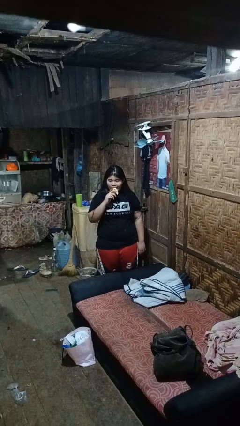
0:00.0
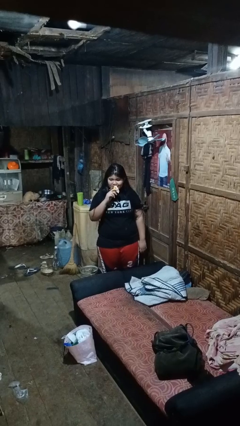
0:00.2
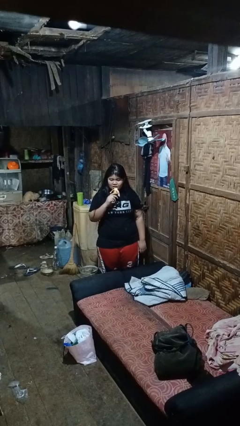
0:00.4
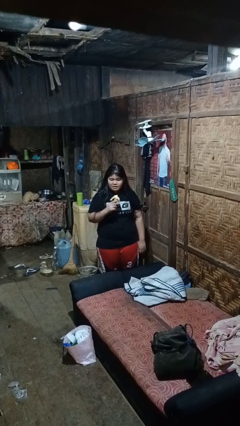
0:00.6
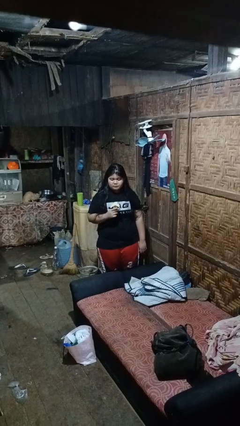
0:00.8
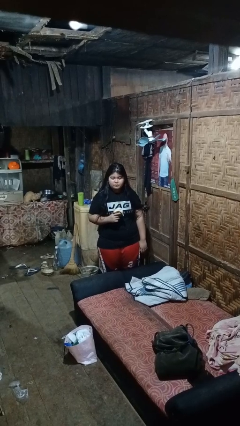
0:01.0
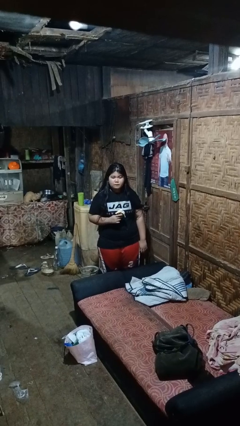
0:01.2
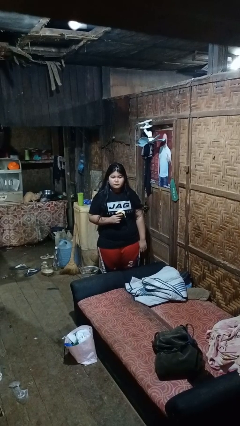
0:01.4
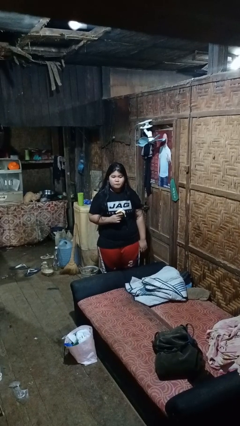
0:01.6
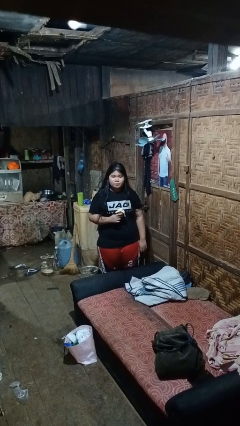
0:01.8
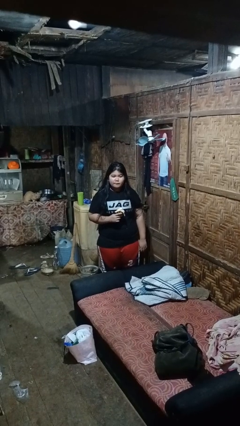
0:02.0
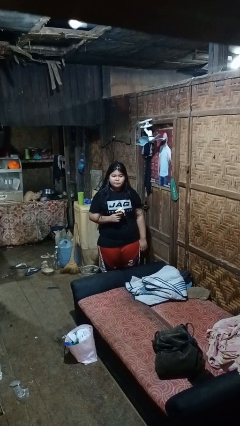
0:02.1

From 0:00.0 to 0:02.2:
person eats banana

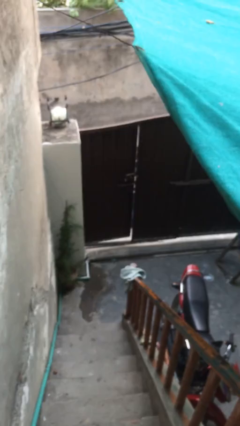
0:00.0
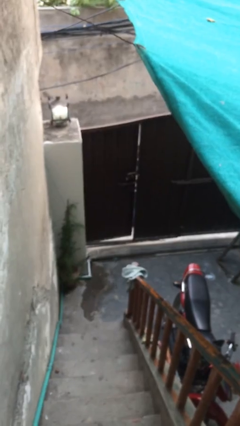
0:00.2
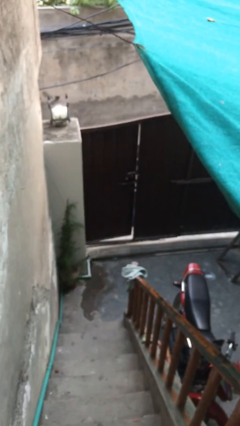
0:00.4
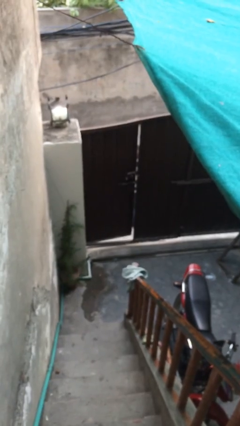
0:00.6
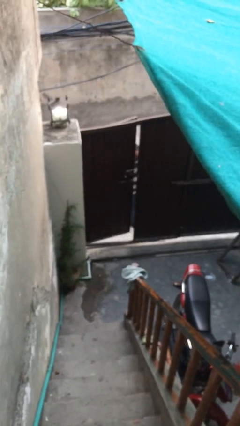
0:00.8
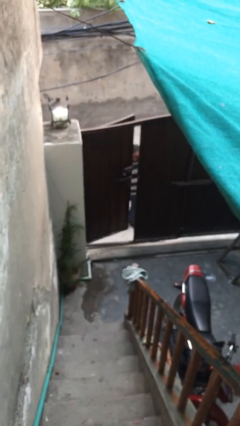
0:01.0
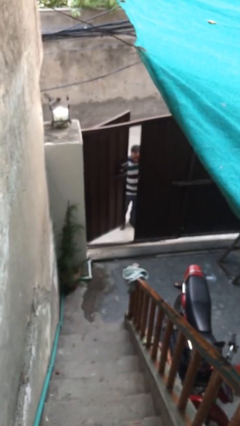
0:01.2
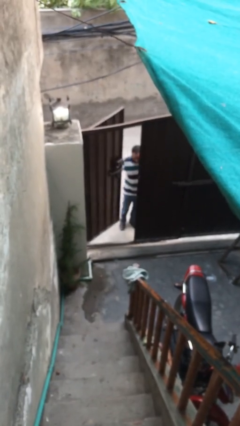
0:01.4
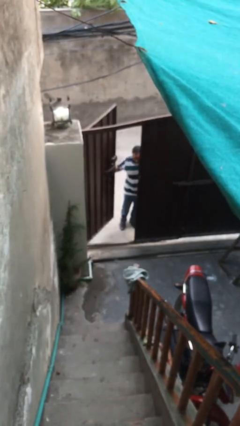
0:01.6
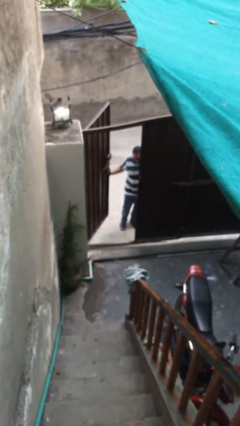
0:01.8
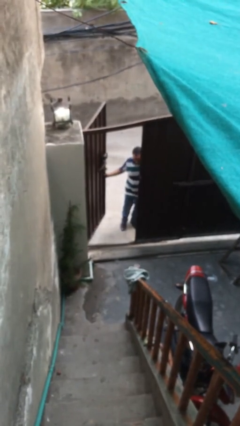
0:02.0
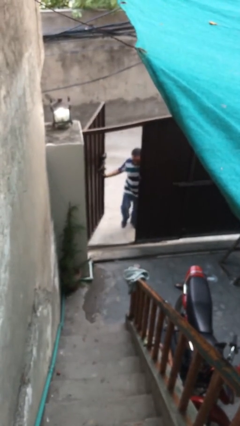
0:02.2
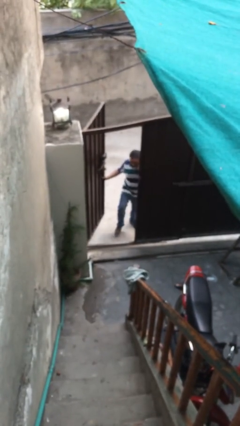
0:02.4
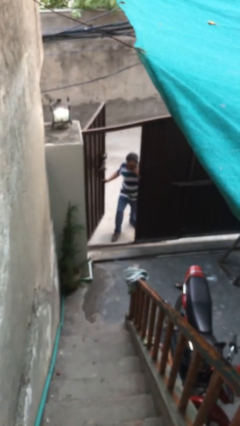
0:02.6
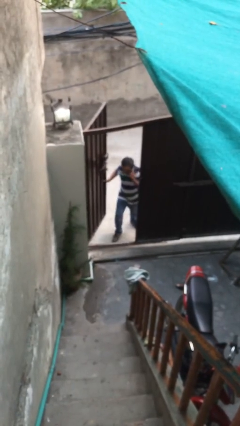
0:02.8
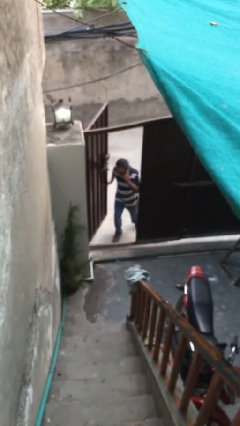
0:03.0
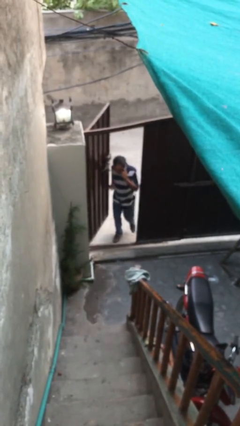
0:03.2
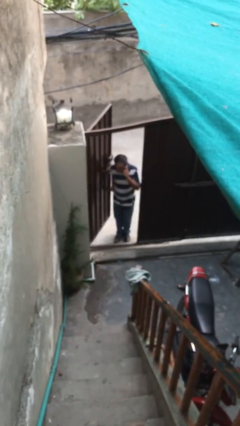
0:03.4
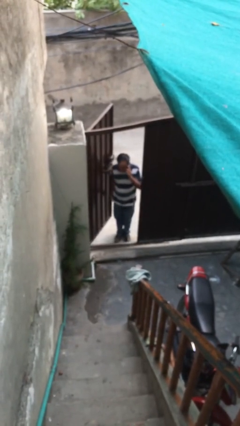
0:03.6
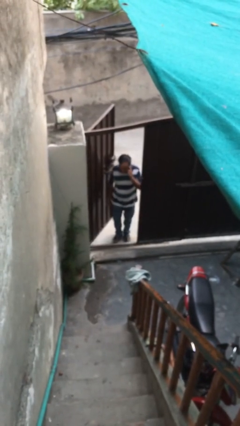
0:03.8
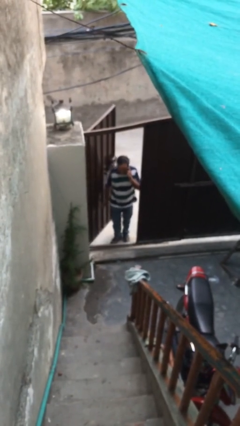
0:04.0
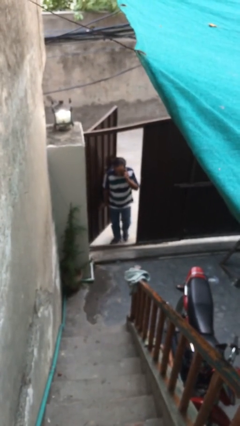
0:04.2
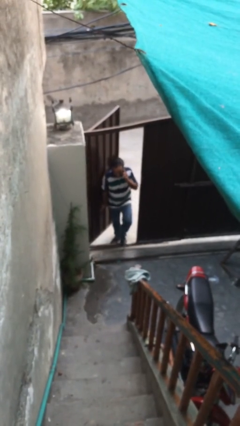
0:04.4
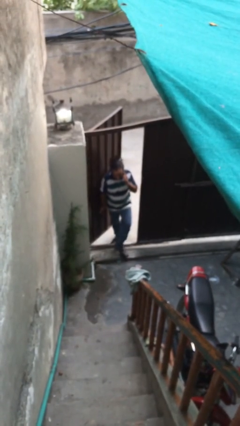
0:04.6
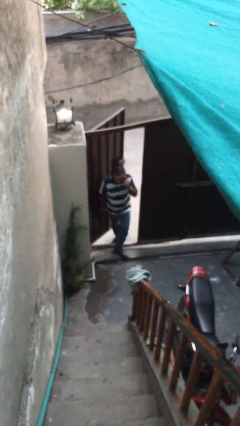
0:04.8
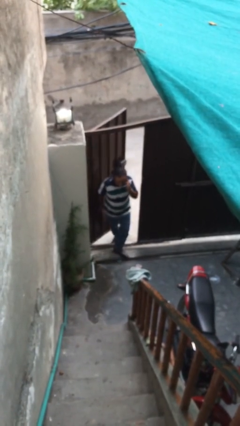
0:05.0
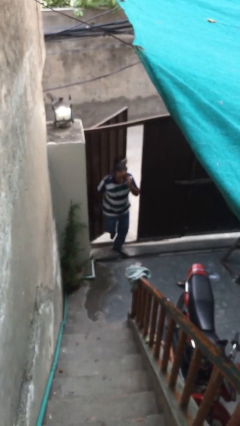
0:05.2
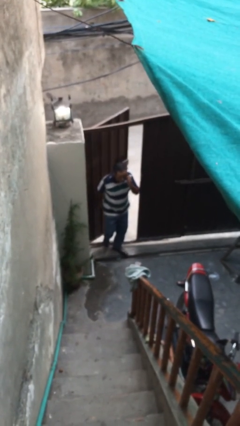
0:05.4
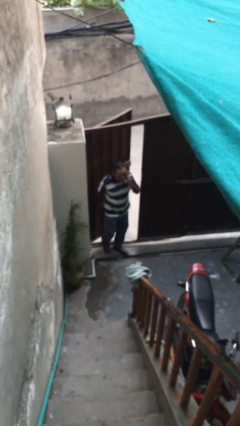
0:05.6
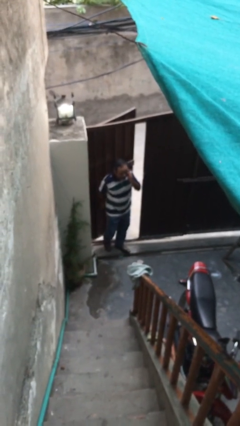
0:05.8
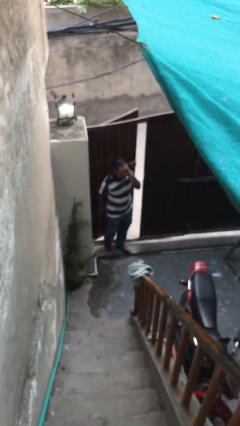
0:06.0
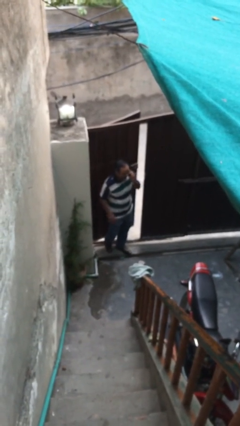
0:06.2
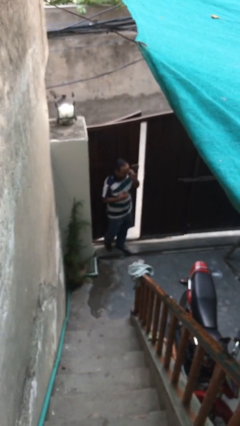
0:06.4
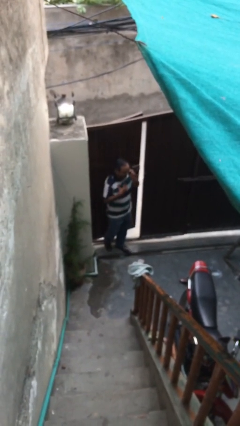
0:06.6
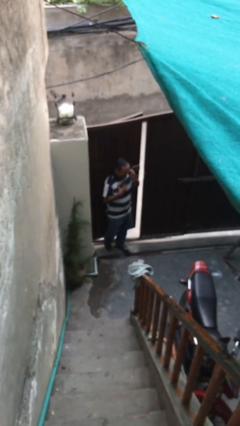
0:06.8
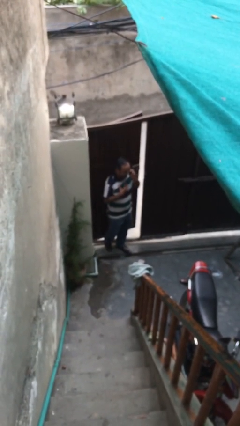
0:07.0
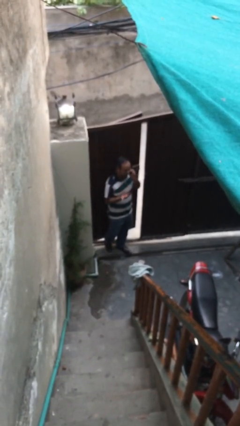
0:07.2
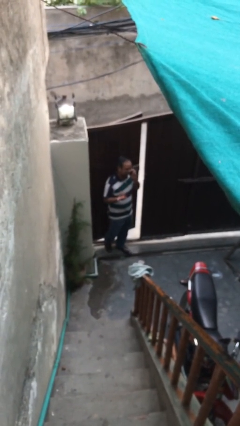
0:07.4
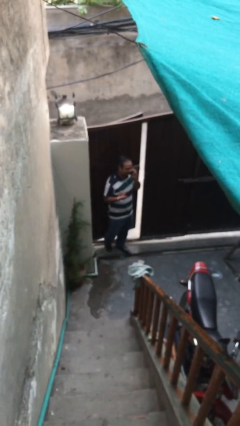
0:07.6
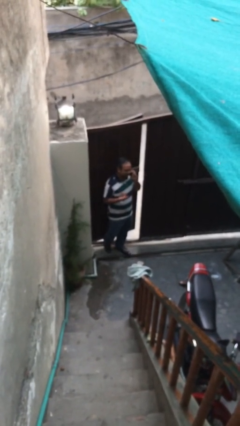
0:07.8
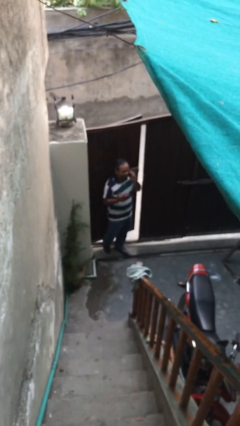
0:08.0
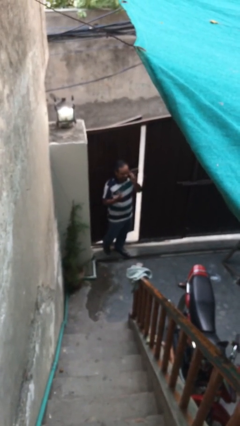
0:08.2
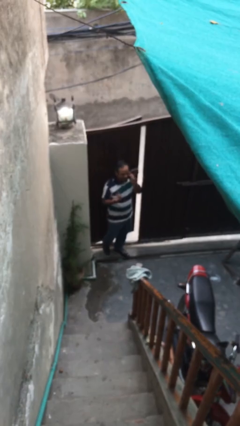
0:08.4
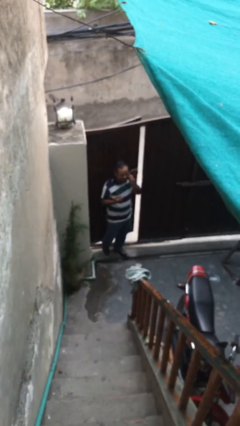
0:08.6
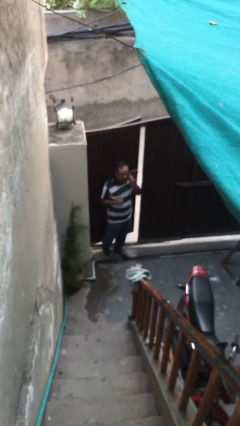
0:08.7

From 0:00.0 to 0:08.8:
person enters scene through structure

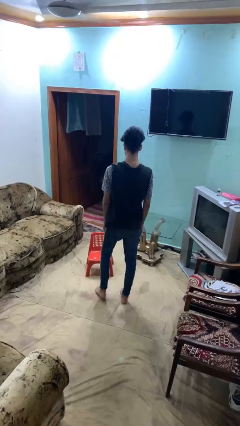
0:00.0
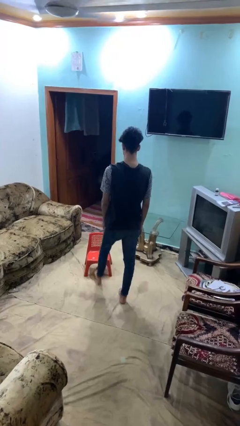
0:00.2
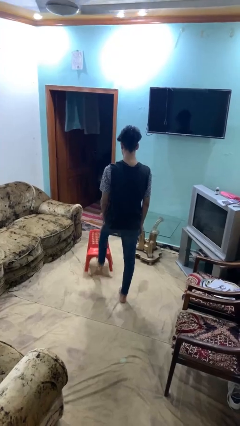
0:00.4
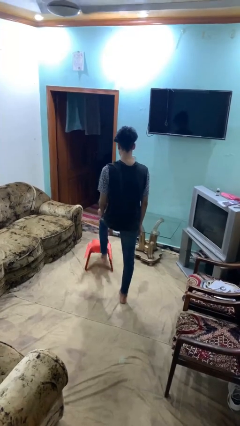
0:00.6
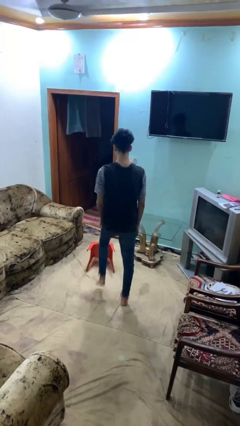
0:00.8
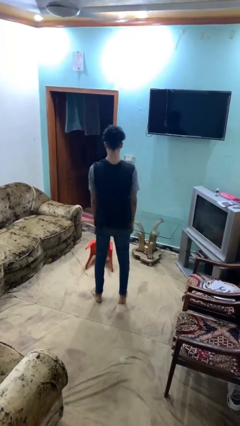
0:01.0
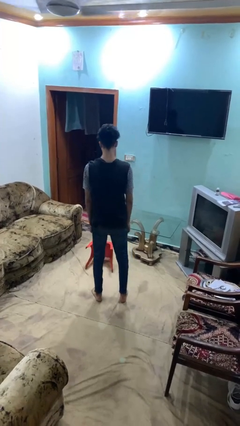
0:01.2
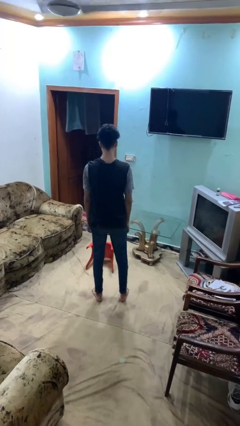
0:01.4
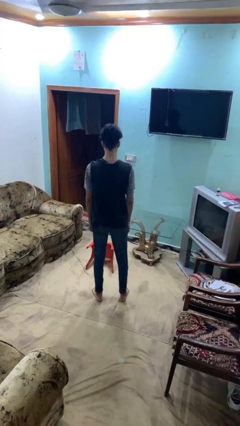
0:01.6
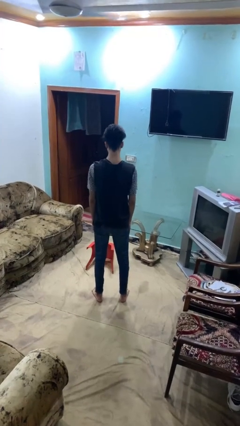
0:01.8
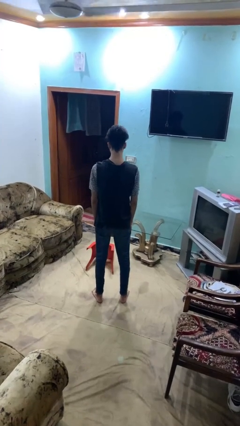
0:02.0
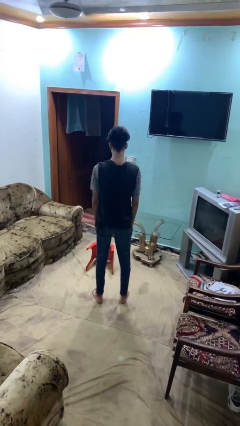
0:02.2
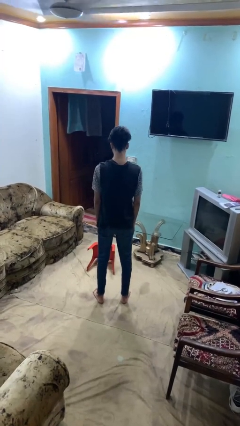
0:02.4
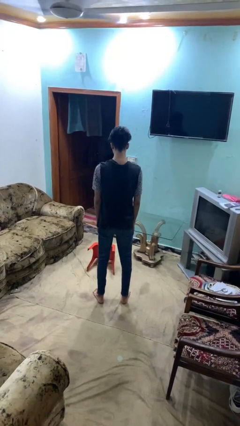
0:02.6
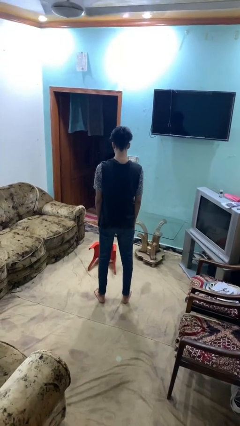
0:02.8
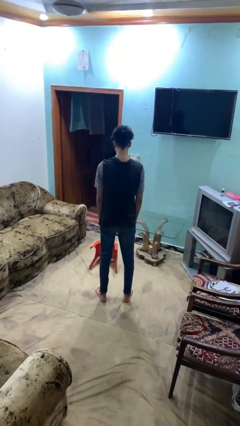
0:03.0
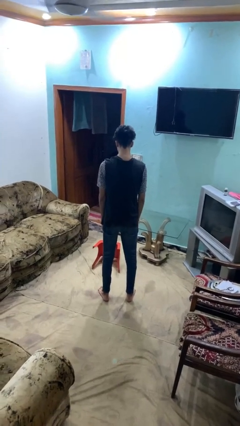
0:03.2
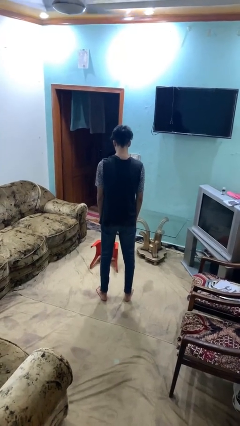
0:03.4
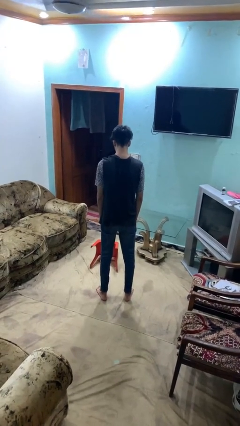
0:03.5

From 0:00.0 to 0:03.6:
person knocks over furniture

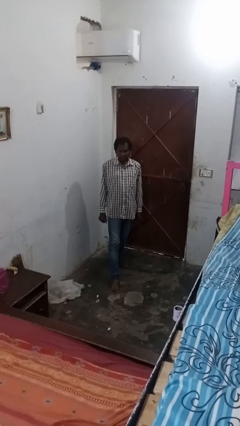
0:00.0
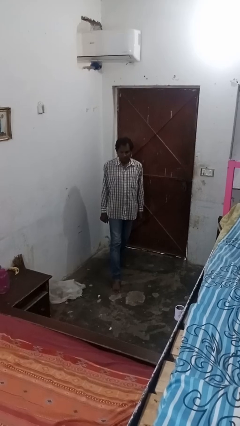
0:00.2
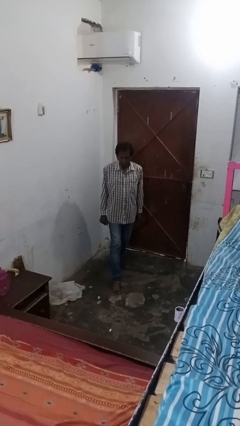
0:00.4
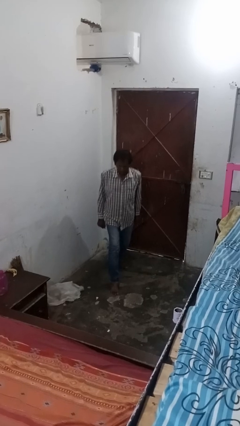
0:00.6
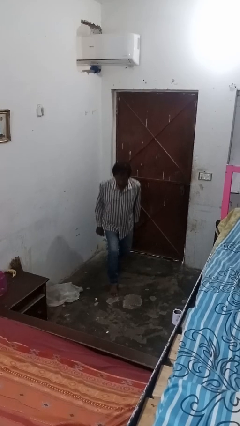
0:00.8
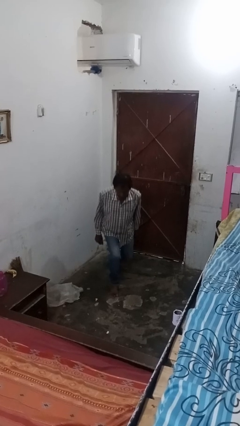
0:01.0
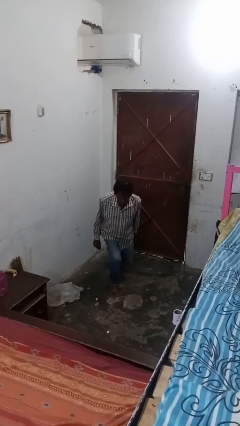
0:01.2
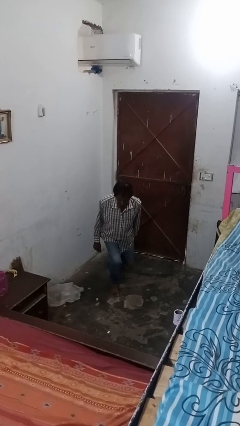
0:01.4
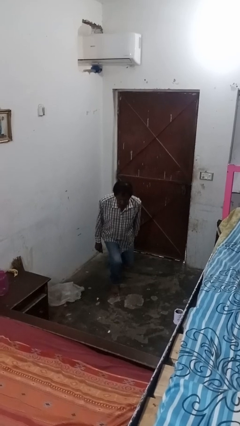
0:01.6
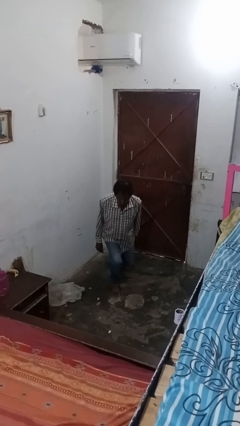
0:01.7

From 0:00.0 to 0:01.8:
person exercises with lunges

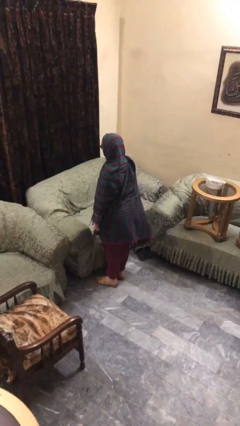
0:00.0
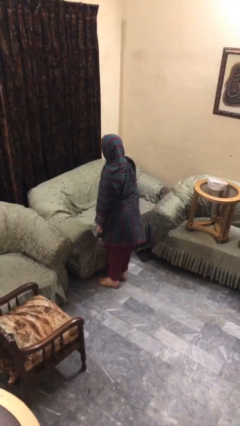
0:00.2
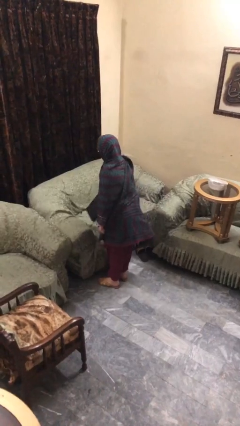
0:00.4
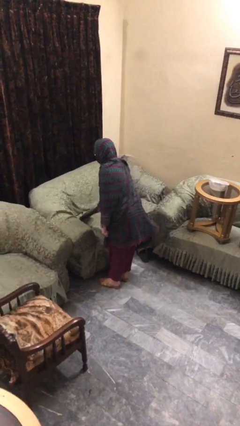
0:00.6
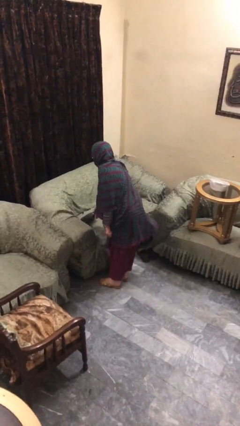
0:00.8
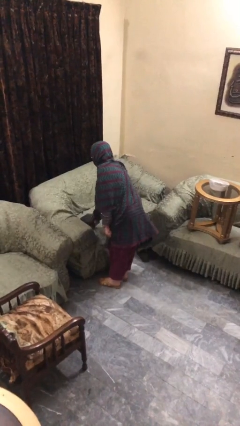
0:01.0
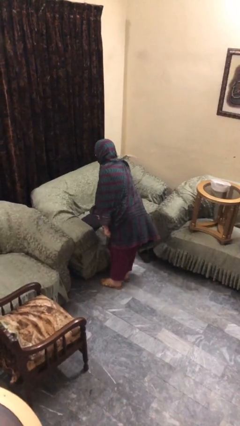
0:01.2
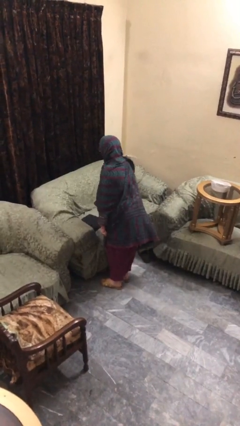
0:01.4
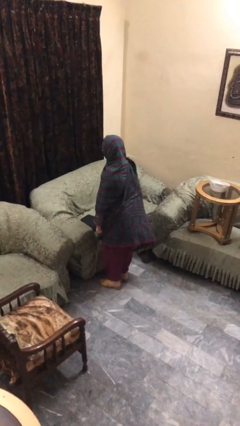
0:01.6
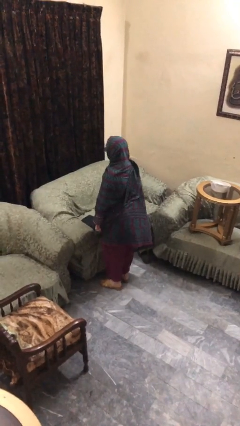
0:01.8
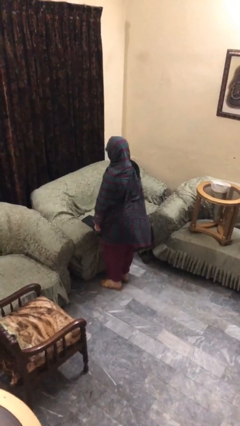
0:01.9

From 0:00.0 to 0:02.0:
person puts down object on couch
